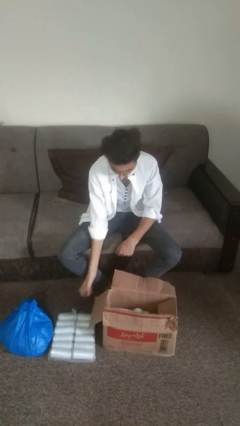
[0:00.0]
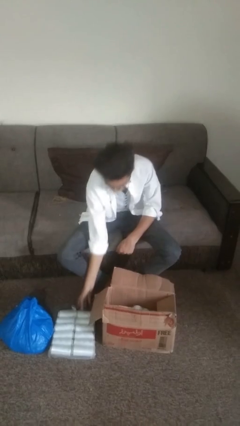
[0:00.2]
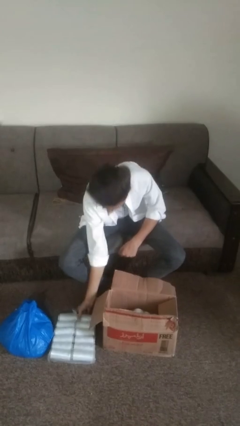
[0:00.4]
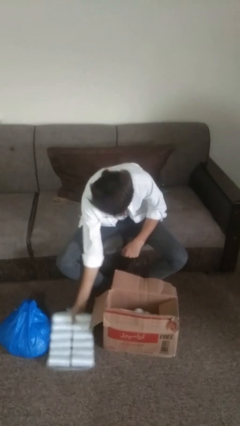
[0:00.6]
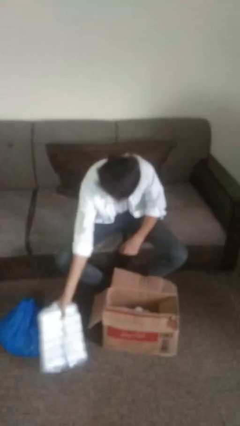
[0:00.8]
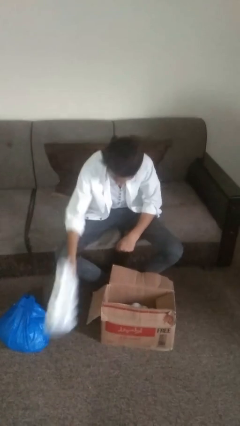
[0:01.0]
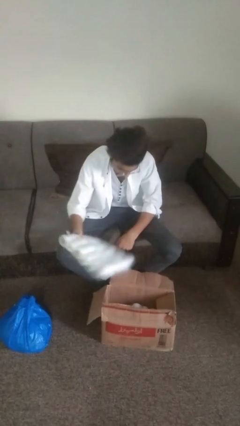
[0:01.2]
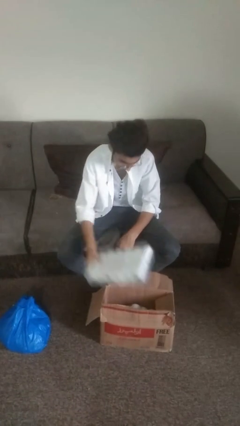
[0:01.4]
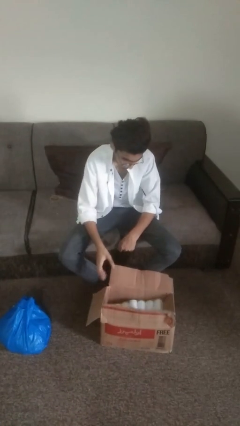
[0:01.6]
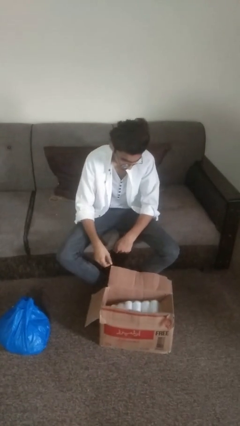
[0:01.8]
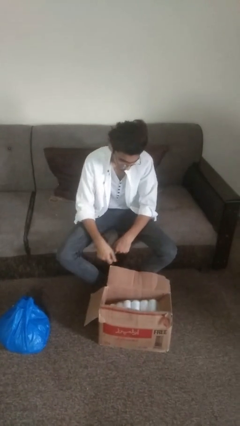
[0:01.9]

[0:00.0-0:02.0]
person puts object into box

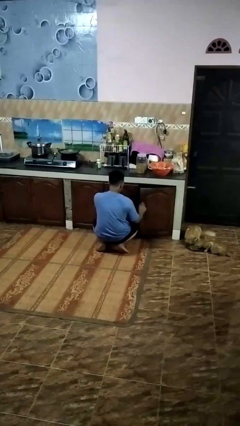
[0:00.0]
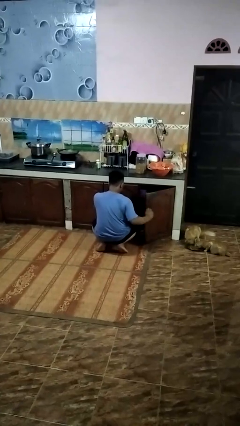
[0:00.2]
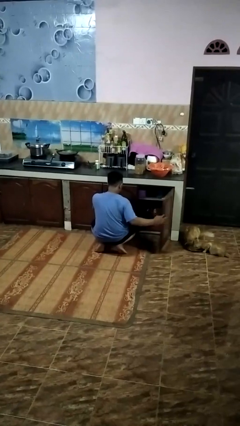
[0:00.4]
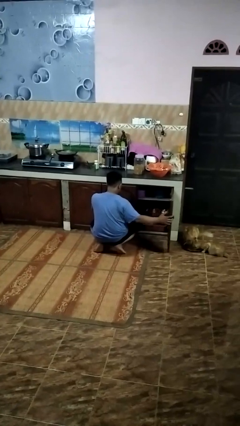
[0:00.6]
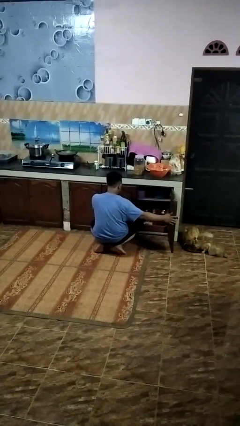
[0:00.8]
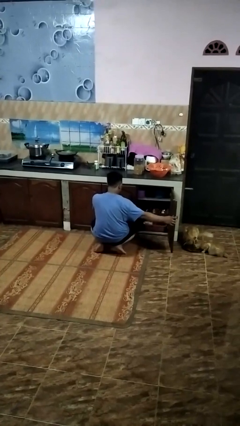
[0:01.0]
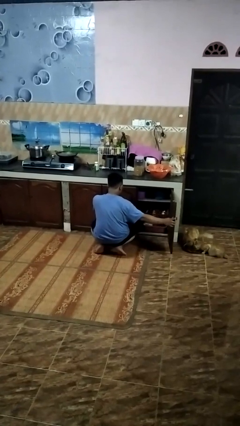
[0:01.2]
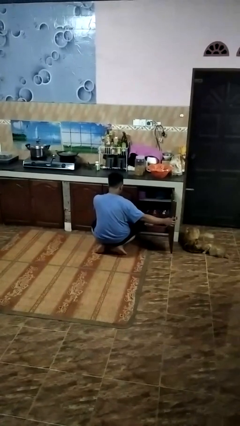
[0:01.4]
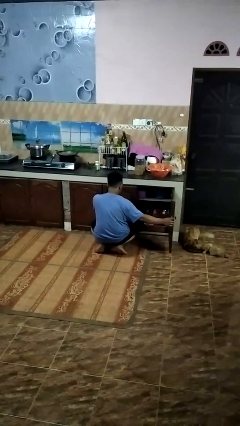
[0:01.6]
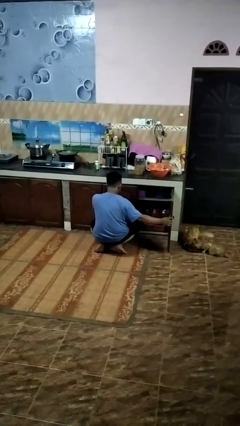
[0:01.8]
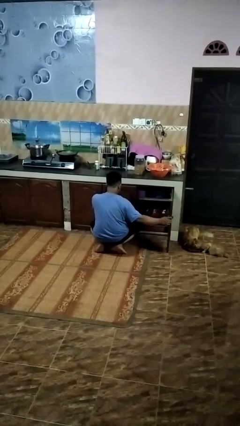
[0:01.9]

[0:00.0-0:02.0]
person opens kitchen drawer

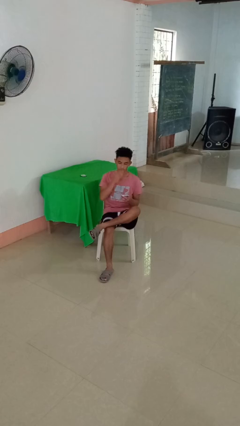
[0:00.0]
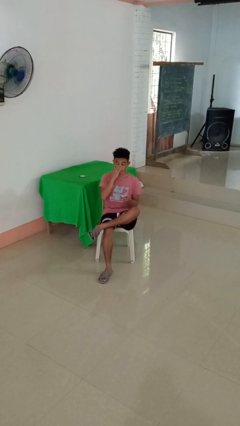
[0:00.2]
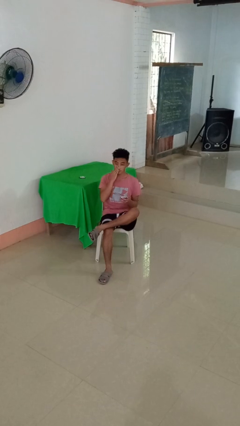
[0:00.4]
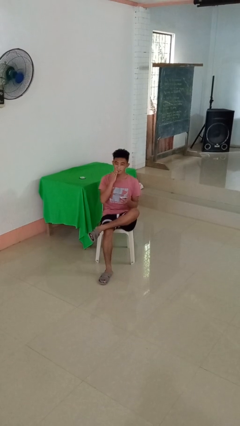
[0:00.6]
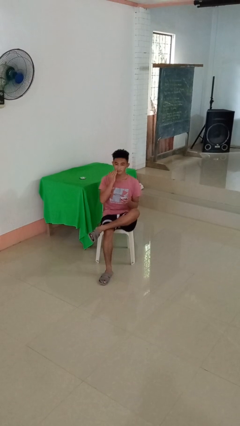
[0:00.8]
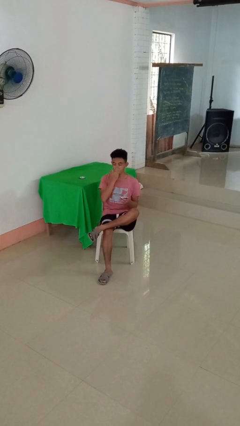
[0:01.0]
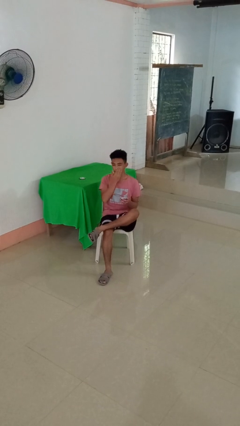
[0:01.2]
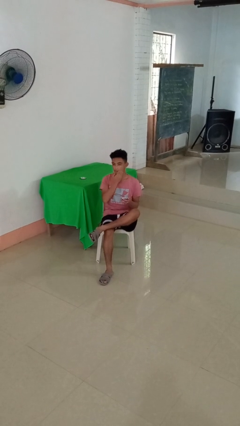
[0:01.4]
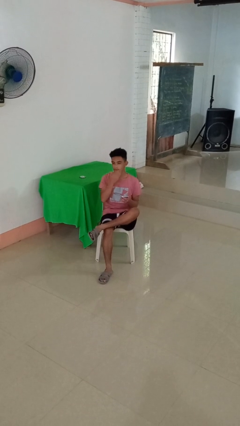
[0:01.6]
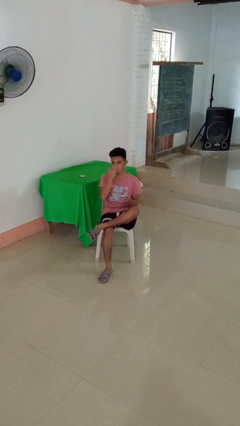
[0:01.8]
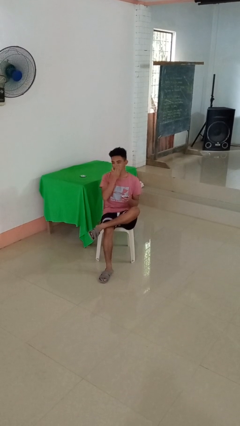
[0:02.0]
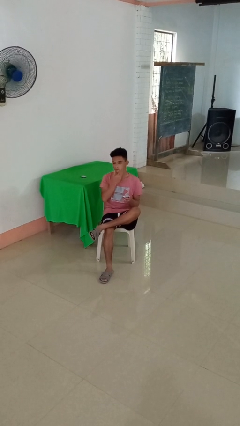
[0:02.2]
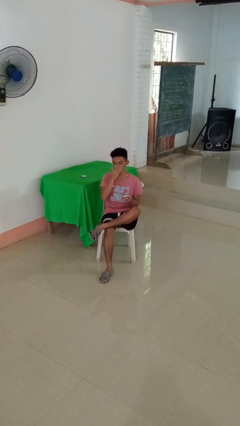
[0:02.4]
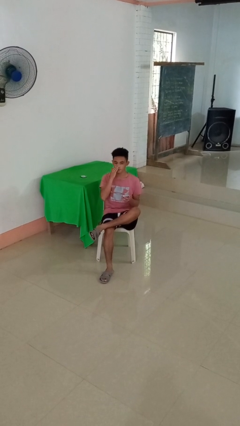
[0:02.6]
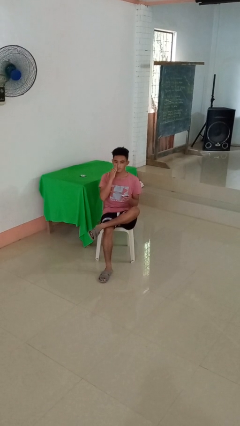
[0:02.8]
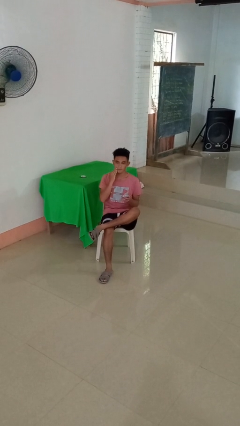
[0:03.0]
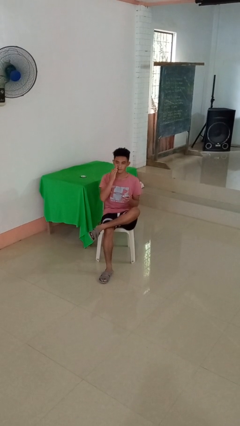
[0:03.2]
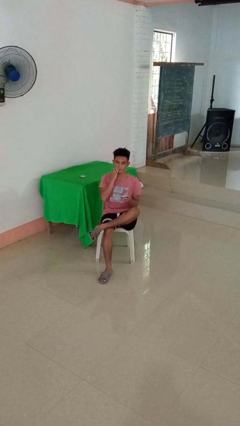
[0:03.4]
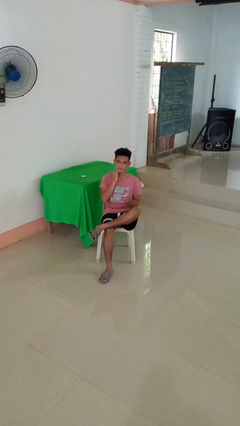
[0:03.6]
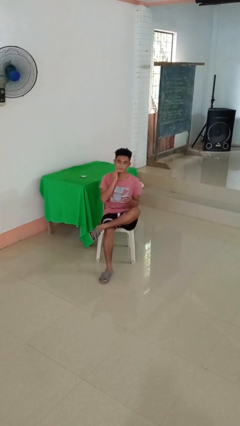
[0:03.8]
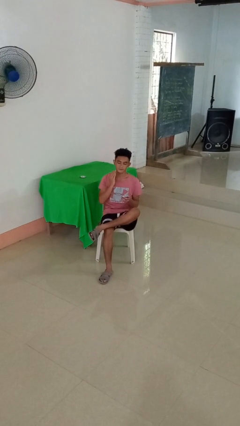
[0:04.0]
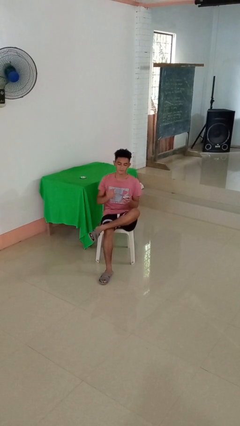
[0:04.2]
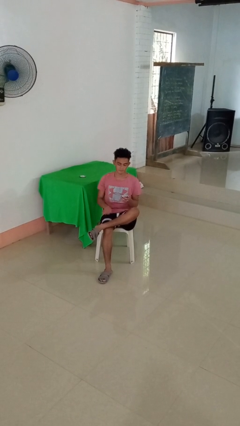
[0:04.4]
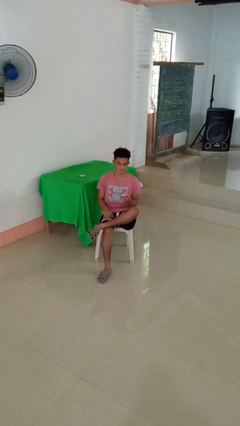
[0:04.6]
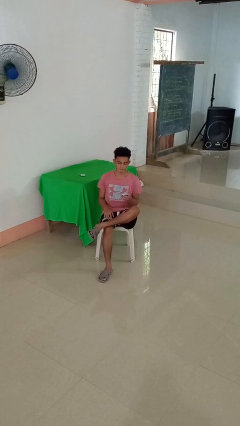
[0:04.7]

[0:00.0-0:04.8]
person applies facial moisturizer

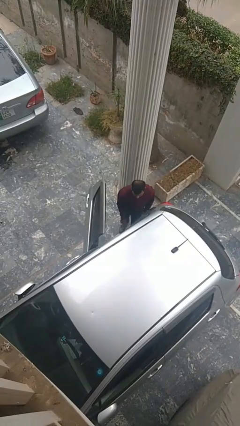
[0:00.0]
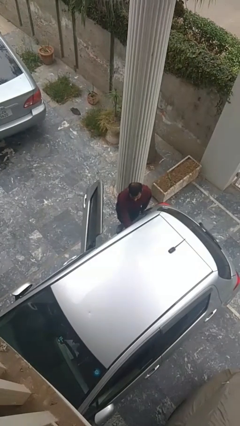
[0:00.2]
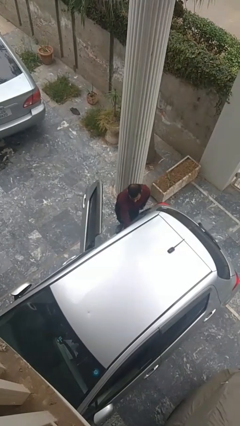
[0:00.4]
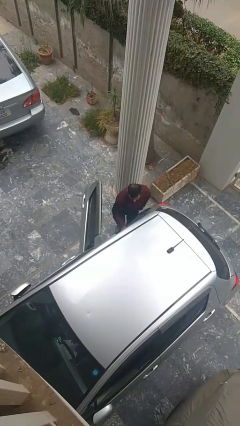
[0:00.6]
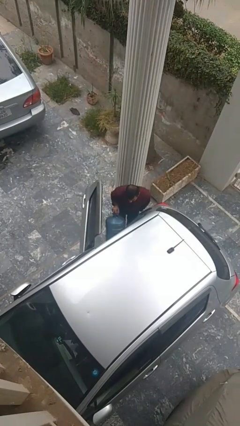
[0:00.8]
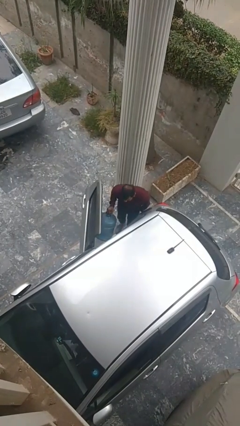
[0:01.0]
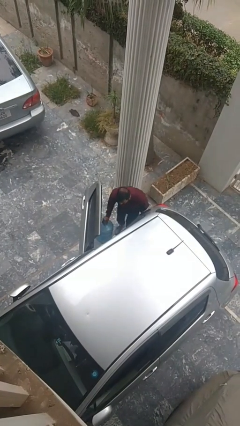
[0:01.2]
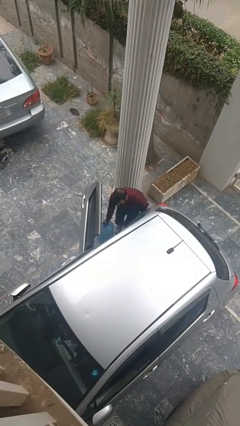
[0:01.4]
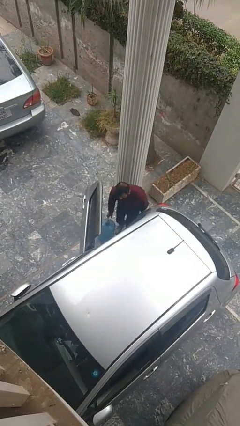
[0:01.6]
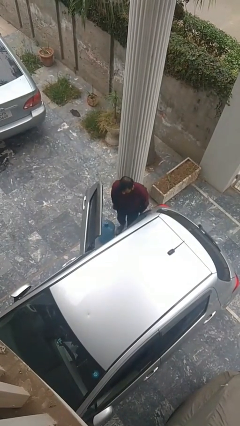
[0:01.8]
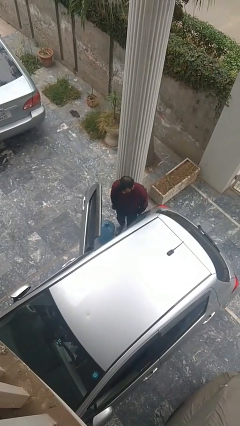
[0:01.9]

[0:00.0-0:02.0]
person unloads car

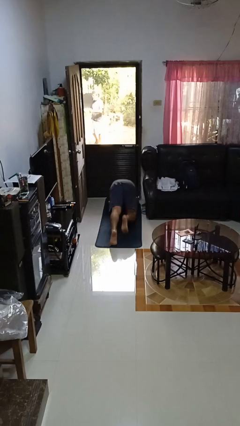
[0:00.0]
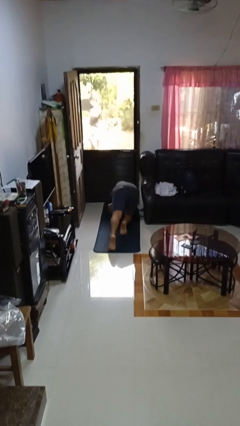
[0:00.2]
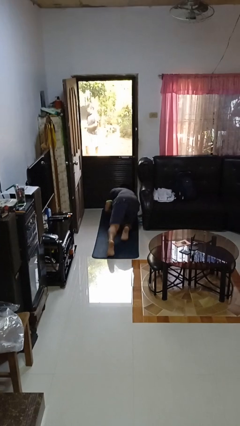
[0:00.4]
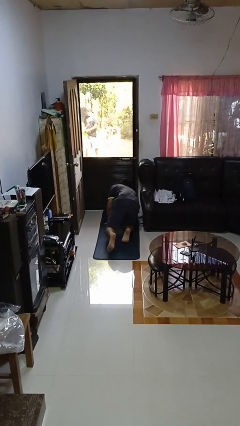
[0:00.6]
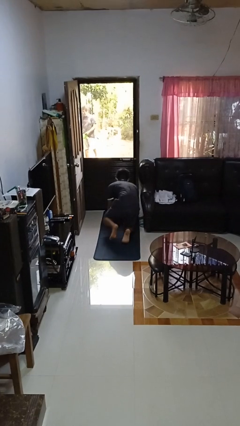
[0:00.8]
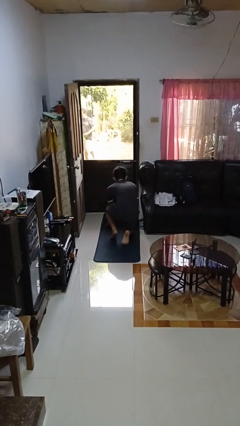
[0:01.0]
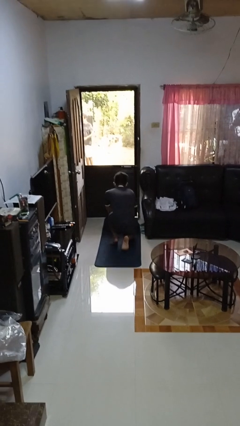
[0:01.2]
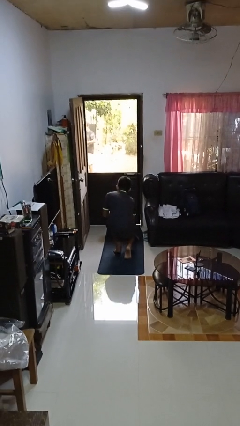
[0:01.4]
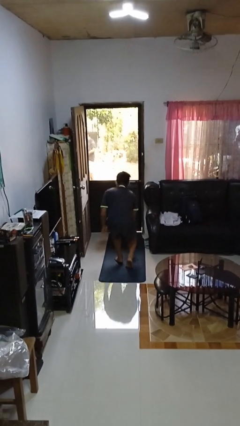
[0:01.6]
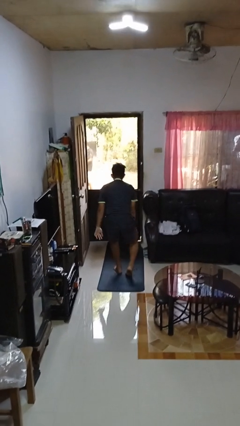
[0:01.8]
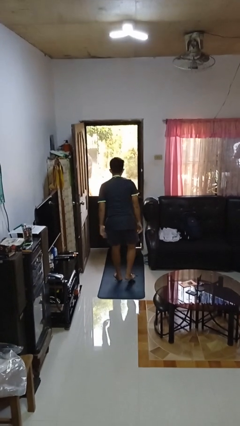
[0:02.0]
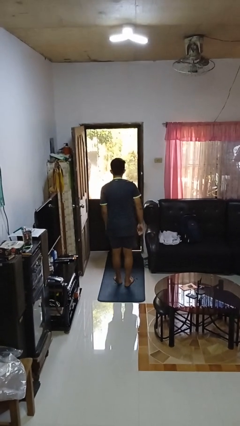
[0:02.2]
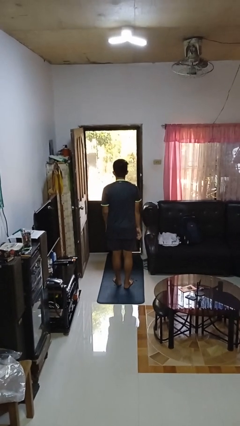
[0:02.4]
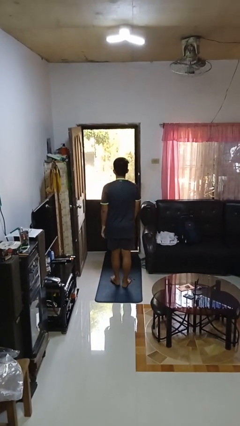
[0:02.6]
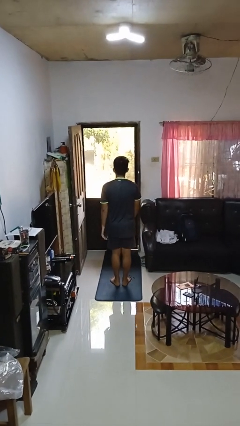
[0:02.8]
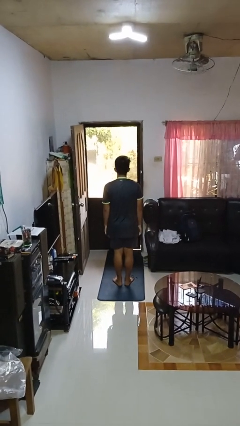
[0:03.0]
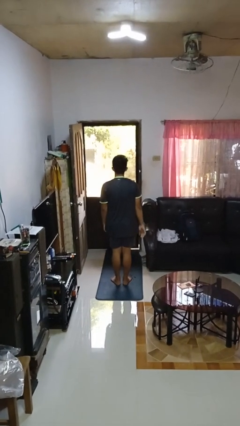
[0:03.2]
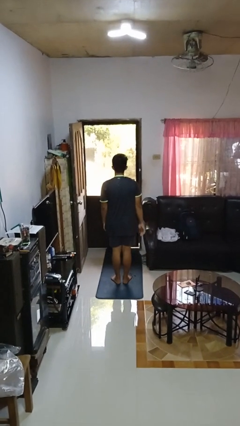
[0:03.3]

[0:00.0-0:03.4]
person stands up from floor

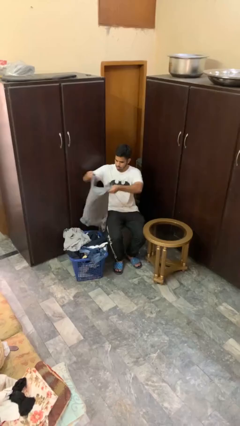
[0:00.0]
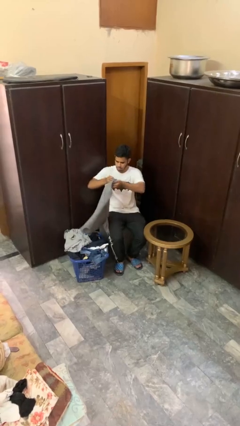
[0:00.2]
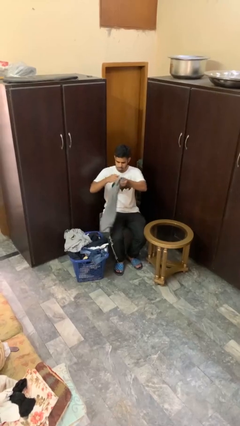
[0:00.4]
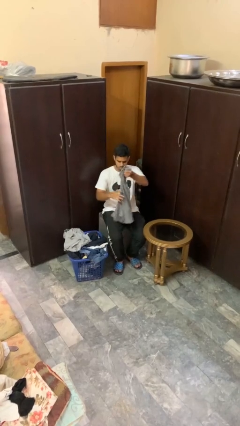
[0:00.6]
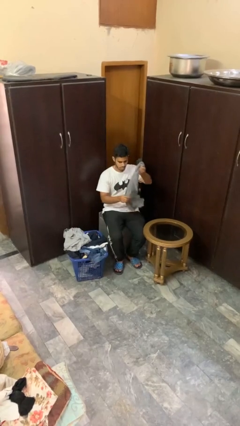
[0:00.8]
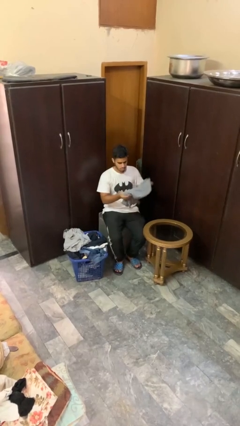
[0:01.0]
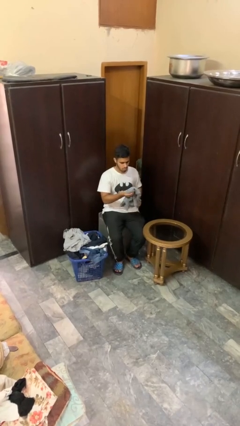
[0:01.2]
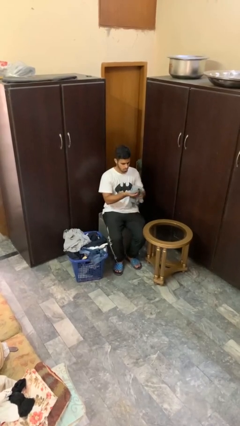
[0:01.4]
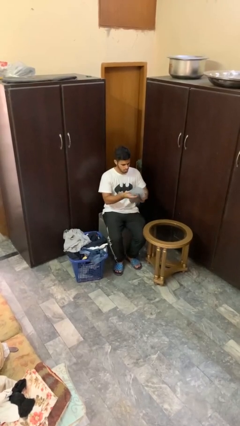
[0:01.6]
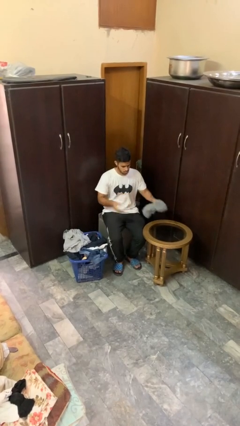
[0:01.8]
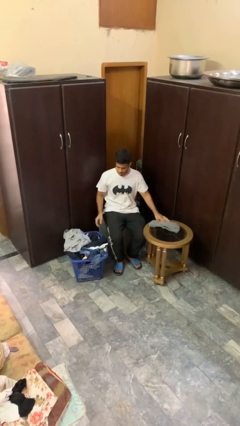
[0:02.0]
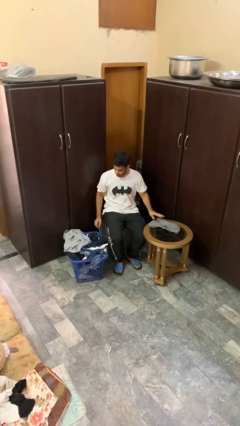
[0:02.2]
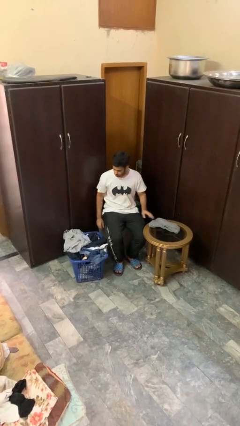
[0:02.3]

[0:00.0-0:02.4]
person folds shirt

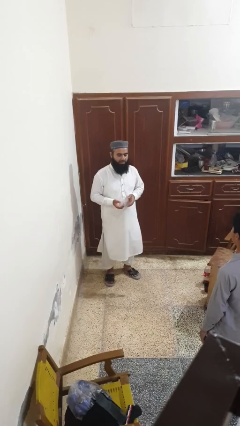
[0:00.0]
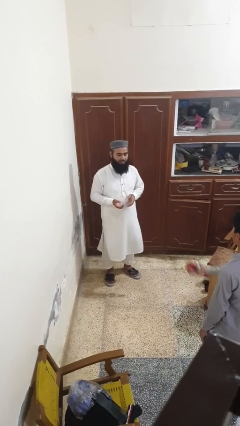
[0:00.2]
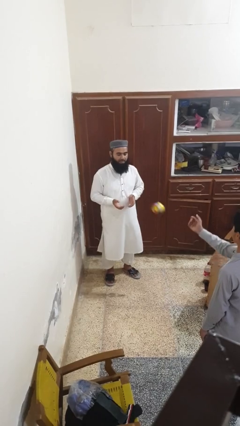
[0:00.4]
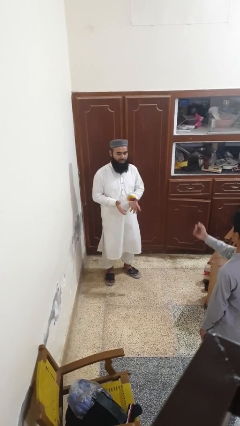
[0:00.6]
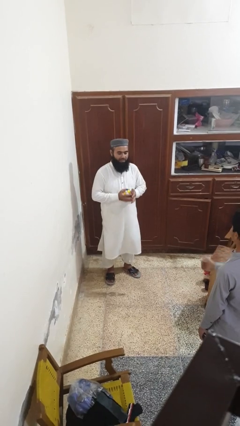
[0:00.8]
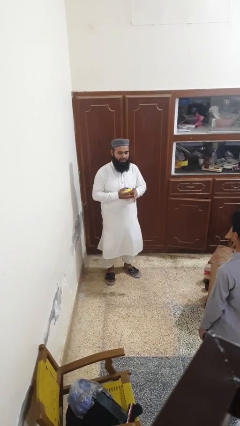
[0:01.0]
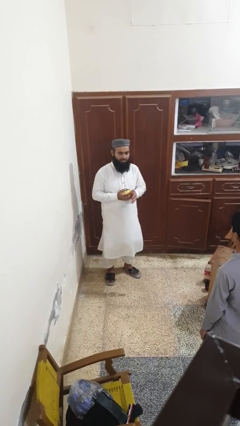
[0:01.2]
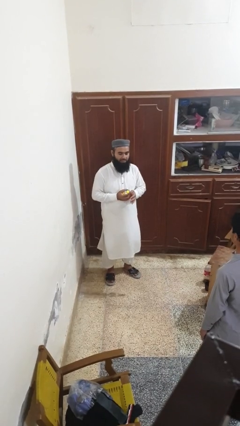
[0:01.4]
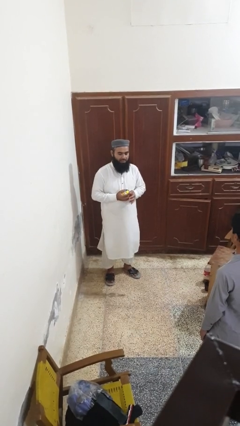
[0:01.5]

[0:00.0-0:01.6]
person catches object from person
